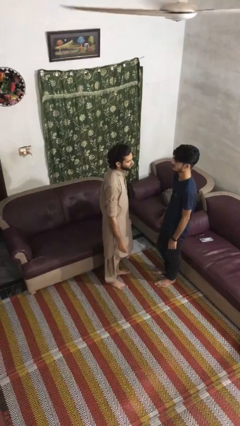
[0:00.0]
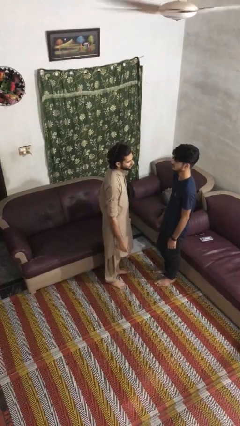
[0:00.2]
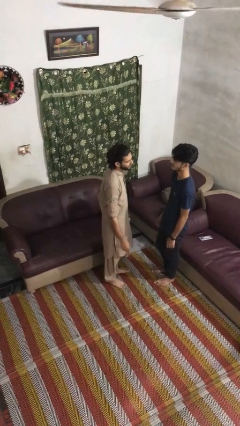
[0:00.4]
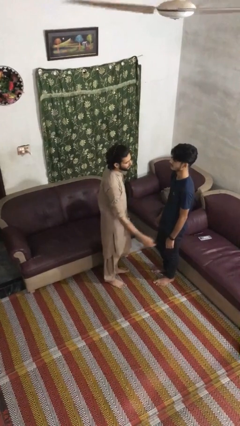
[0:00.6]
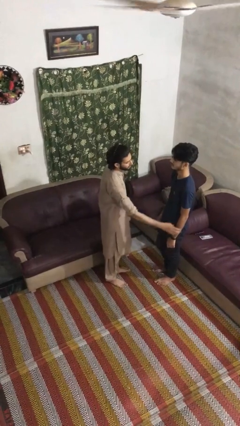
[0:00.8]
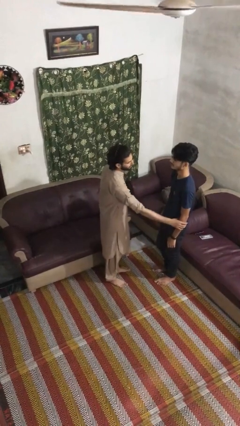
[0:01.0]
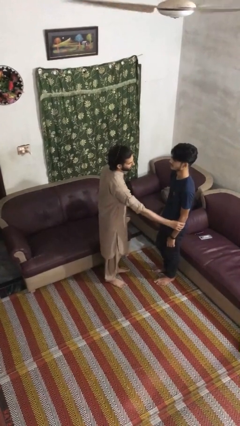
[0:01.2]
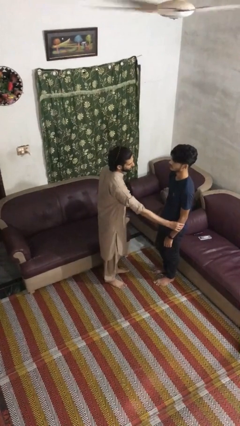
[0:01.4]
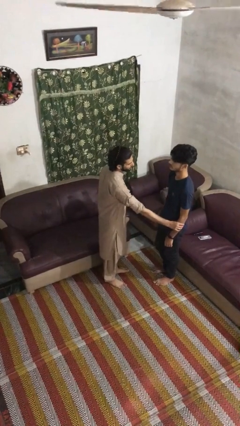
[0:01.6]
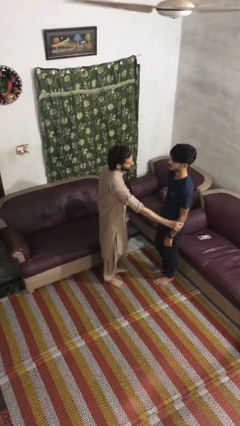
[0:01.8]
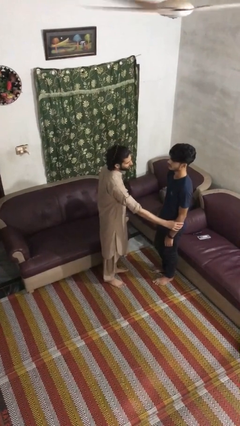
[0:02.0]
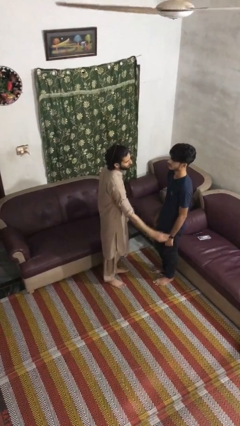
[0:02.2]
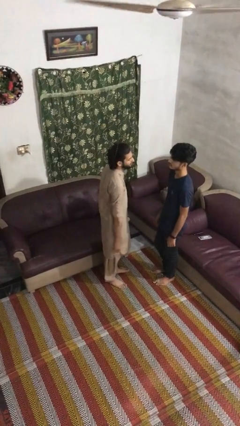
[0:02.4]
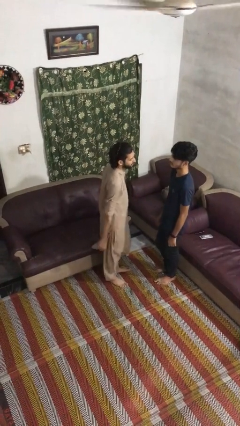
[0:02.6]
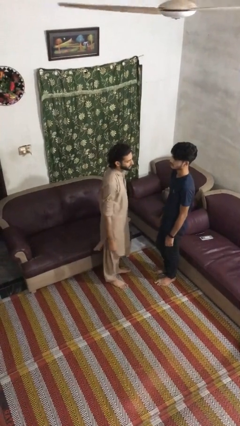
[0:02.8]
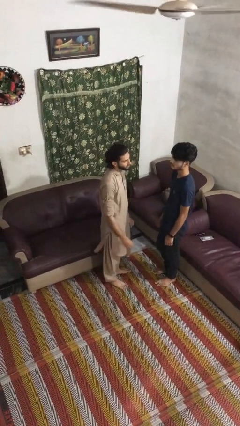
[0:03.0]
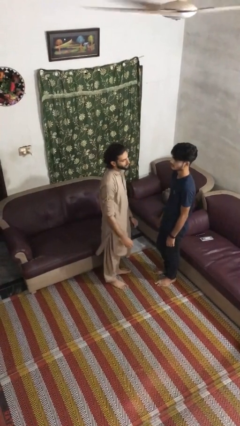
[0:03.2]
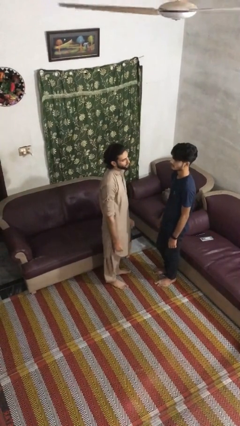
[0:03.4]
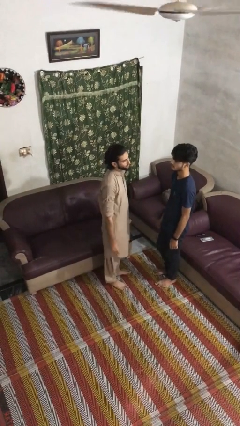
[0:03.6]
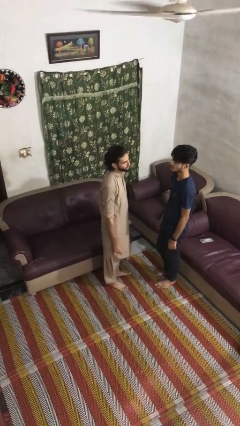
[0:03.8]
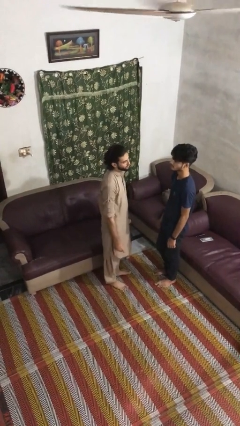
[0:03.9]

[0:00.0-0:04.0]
person grabs person by forearm

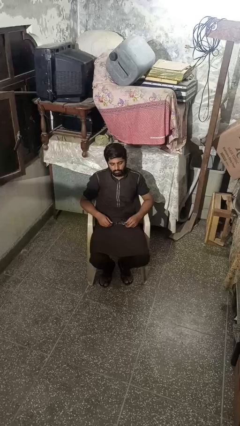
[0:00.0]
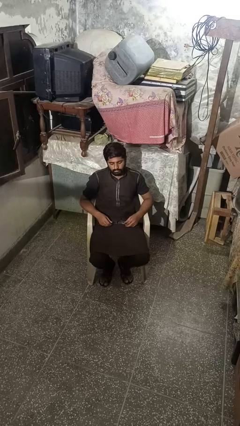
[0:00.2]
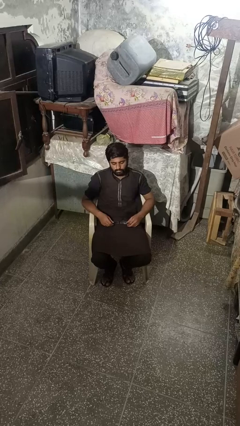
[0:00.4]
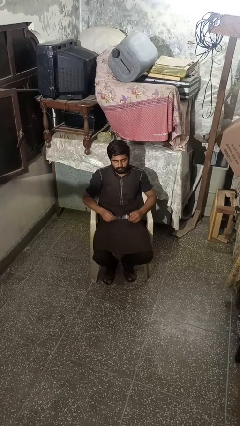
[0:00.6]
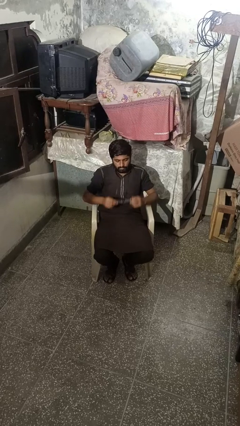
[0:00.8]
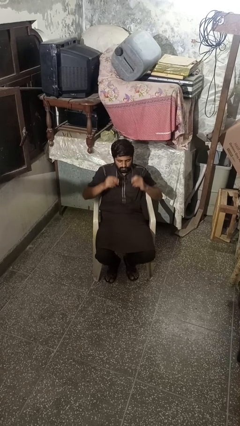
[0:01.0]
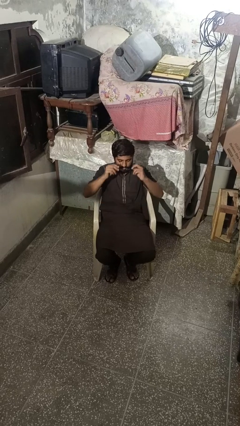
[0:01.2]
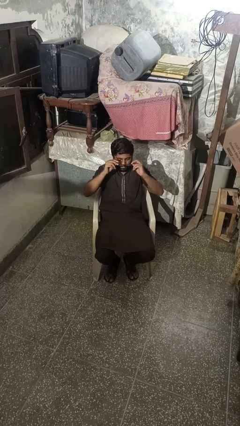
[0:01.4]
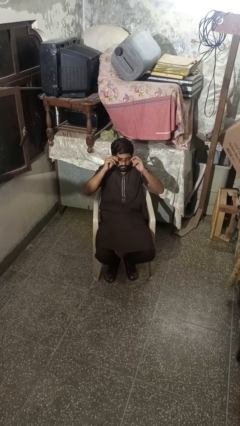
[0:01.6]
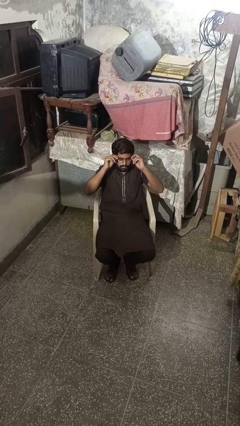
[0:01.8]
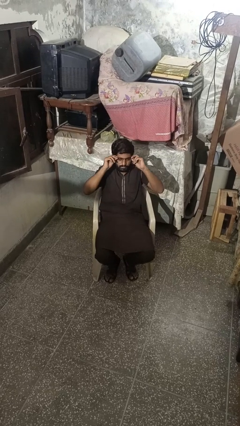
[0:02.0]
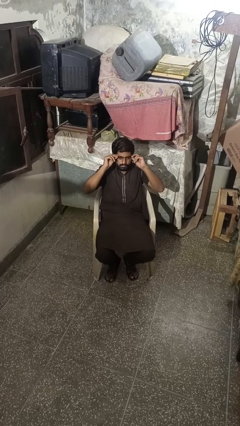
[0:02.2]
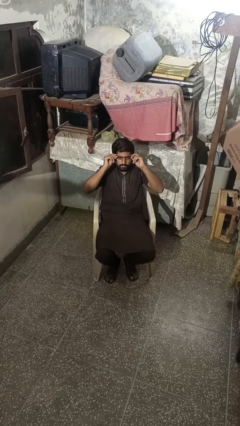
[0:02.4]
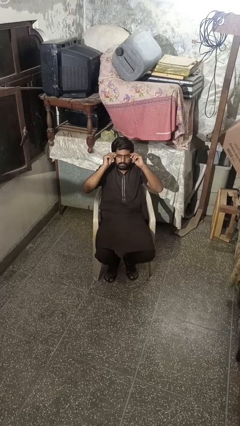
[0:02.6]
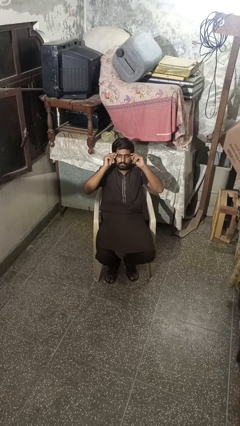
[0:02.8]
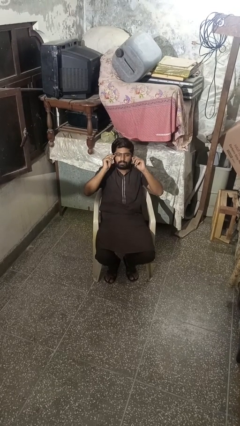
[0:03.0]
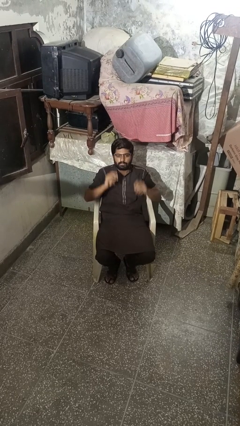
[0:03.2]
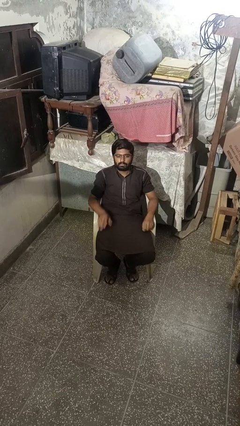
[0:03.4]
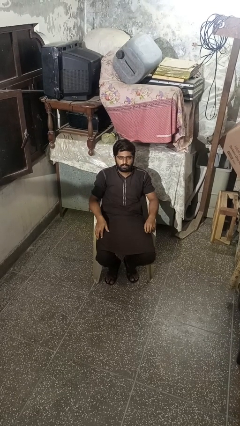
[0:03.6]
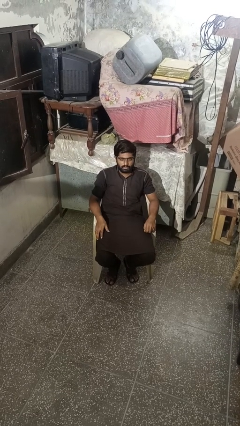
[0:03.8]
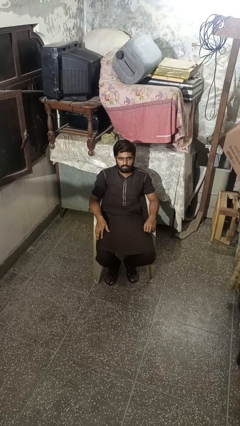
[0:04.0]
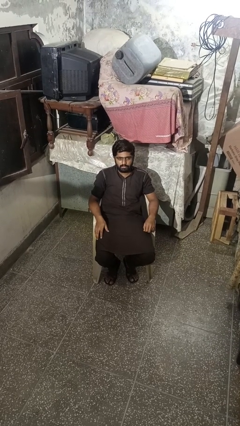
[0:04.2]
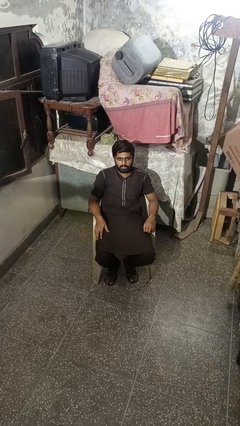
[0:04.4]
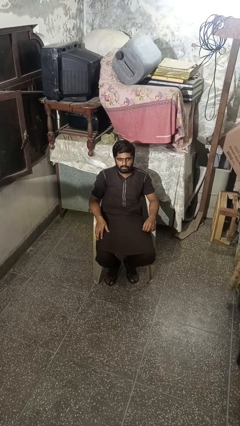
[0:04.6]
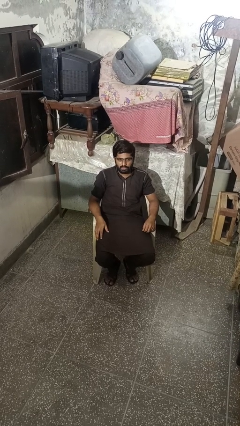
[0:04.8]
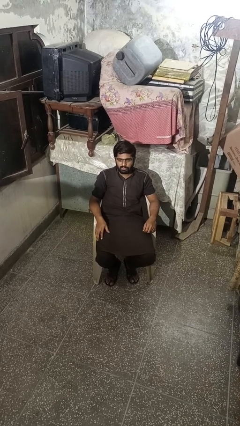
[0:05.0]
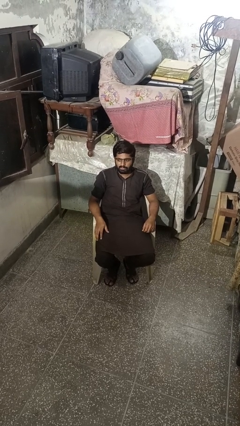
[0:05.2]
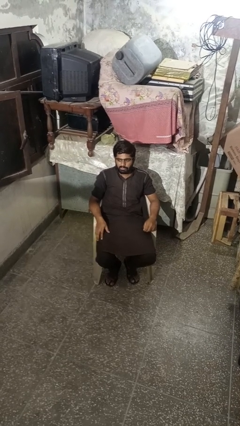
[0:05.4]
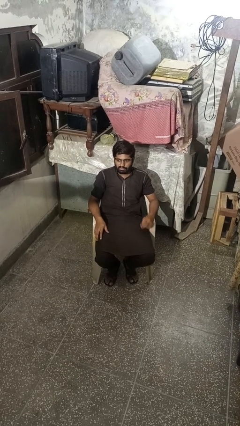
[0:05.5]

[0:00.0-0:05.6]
person puts on glasses

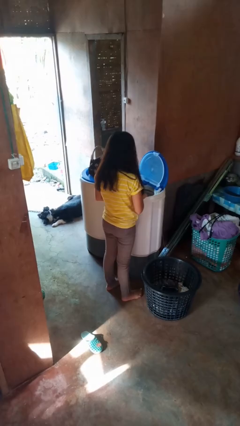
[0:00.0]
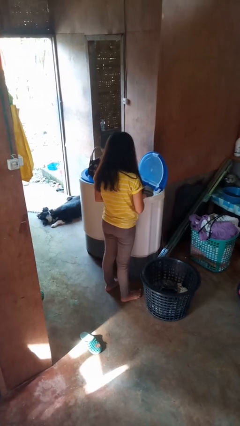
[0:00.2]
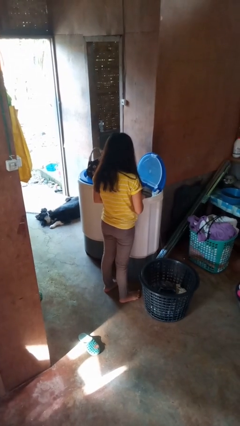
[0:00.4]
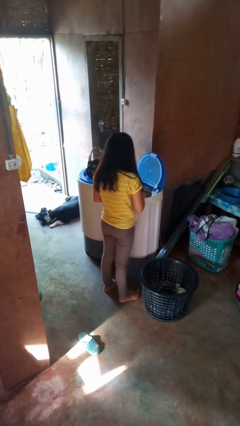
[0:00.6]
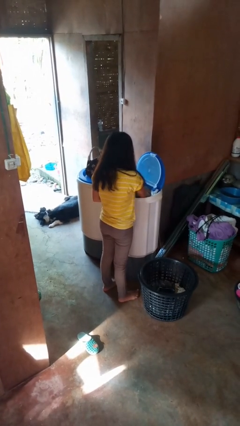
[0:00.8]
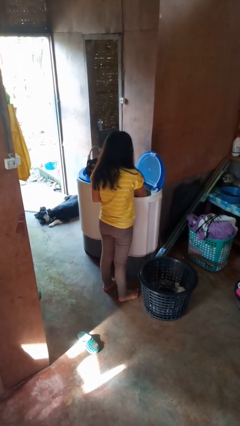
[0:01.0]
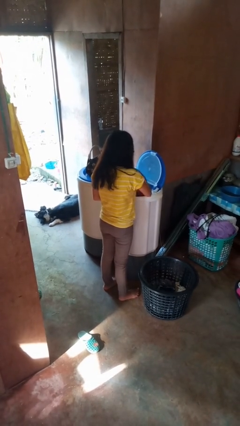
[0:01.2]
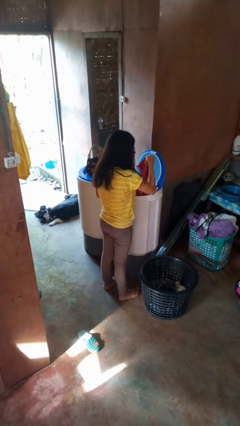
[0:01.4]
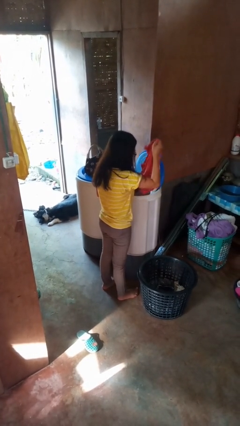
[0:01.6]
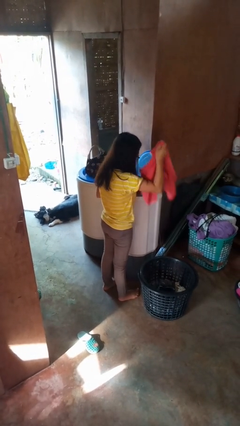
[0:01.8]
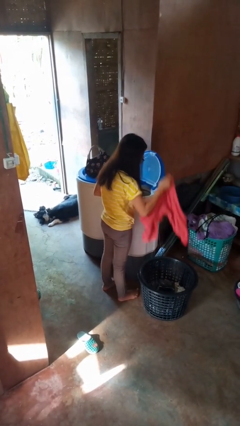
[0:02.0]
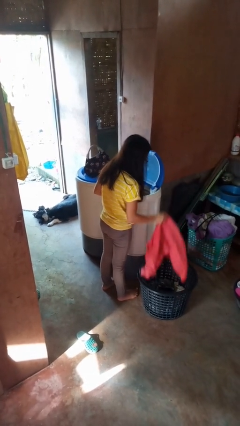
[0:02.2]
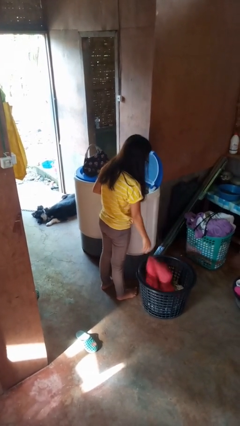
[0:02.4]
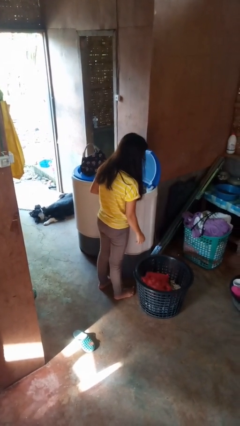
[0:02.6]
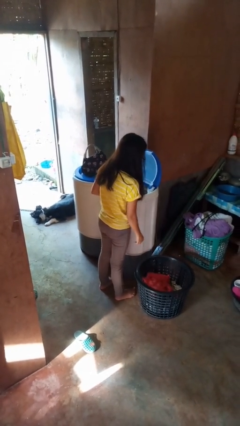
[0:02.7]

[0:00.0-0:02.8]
person unloads clotheswasher

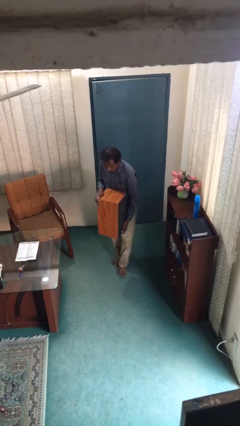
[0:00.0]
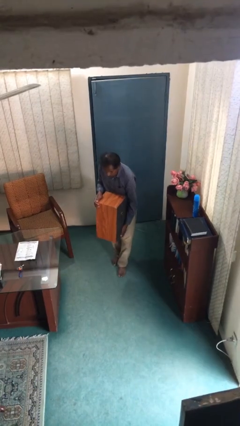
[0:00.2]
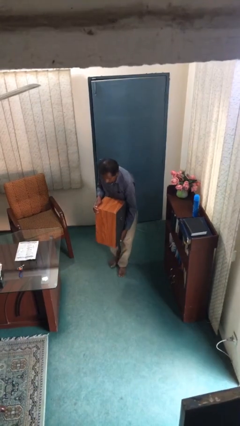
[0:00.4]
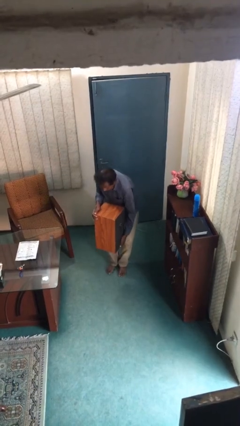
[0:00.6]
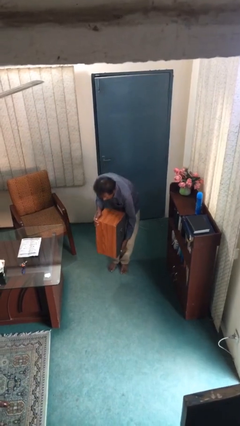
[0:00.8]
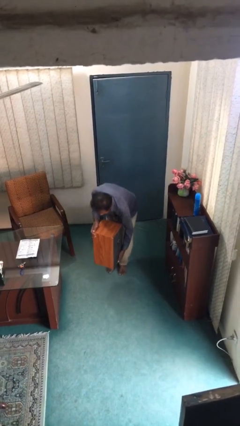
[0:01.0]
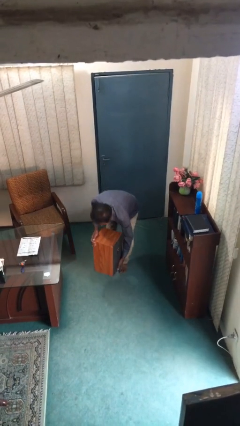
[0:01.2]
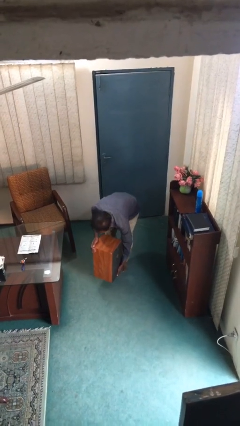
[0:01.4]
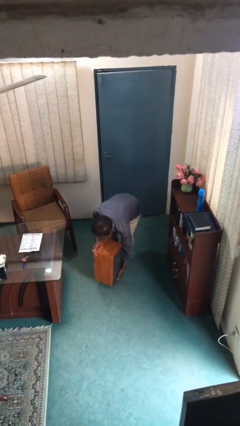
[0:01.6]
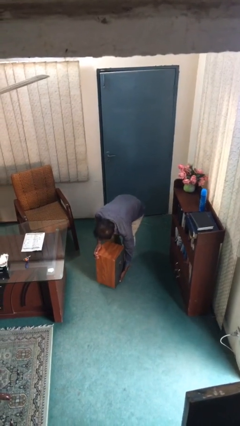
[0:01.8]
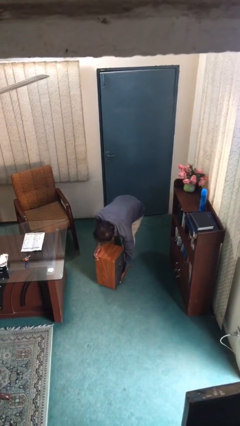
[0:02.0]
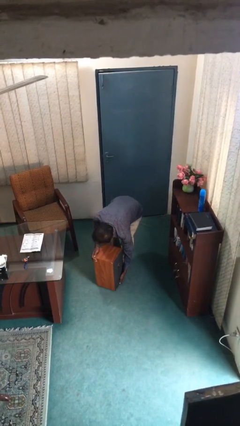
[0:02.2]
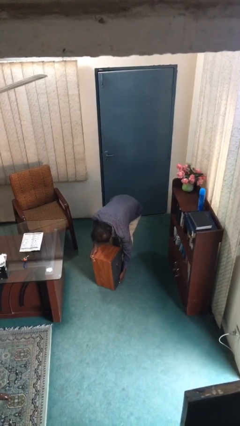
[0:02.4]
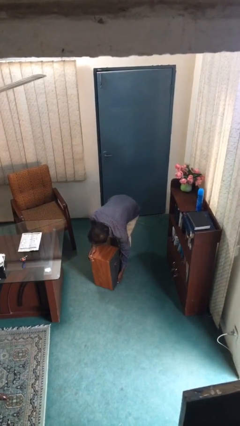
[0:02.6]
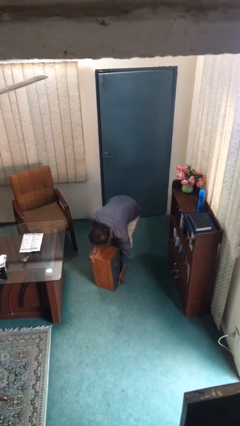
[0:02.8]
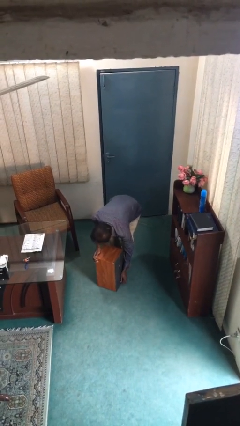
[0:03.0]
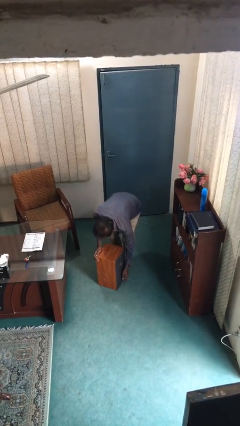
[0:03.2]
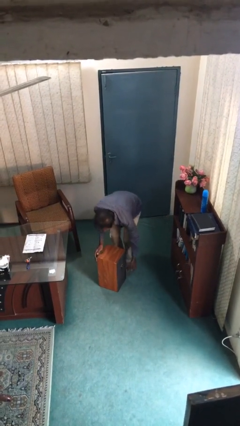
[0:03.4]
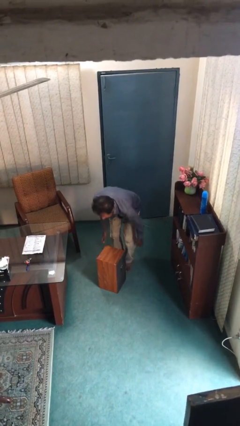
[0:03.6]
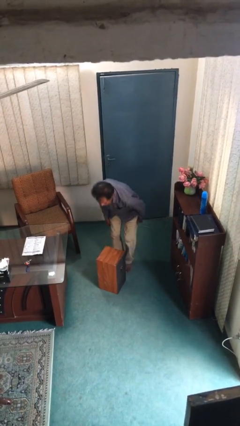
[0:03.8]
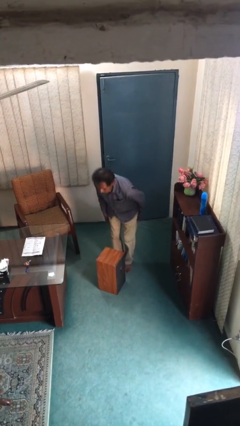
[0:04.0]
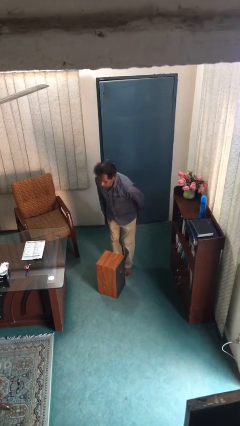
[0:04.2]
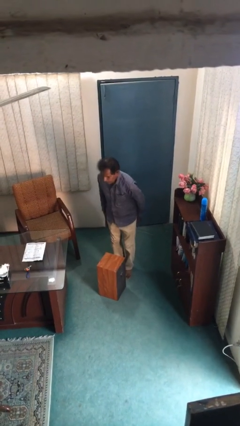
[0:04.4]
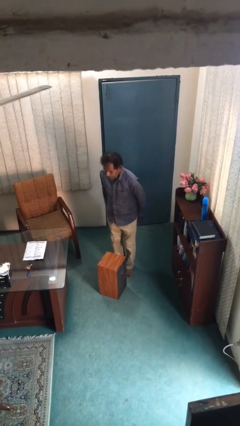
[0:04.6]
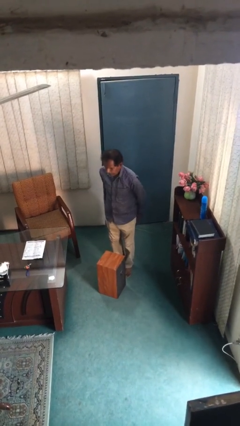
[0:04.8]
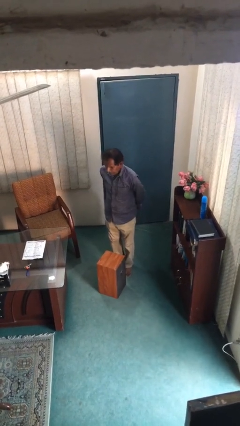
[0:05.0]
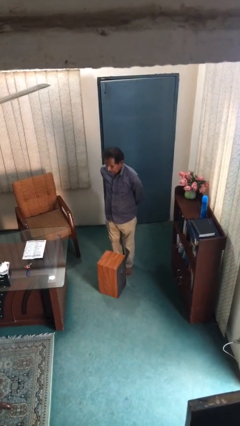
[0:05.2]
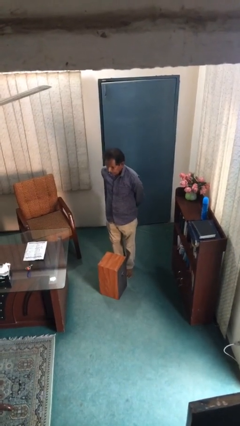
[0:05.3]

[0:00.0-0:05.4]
person puts down object on floor
